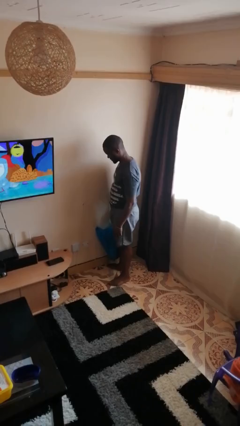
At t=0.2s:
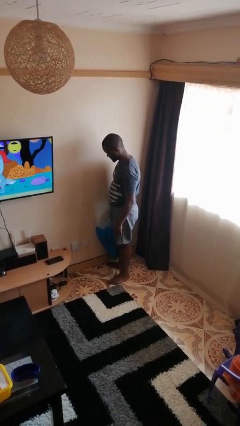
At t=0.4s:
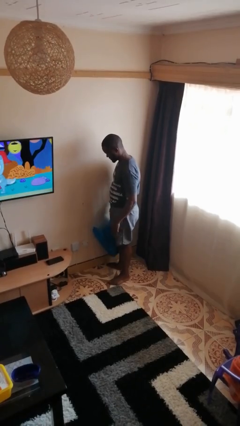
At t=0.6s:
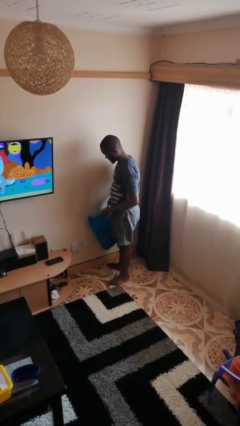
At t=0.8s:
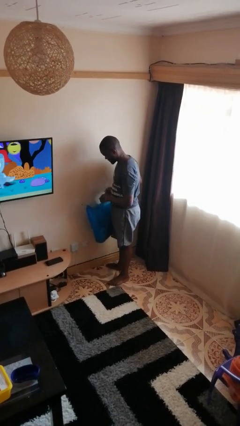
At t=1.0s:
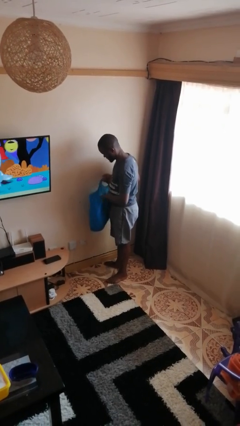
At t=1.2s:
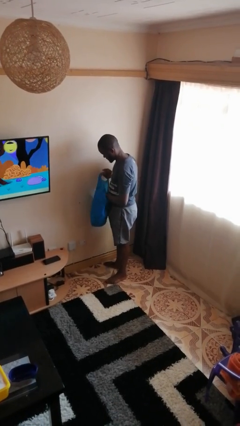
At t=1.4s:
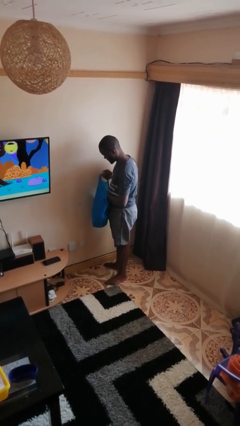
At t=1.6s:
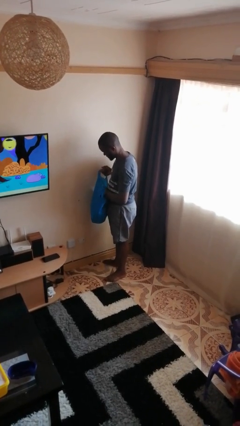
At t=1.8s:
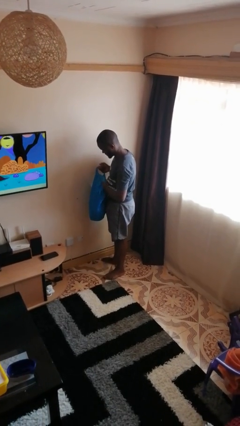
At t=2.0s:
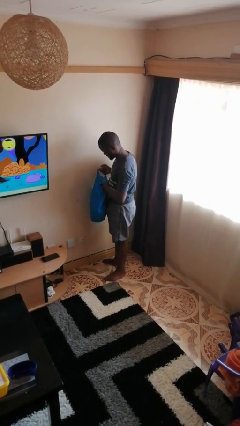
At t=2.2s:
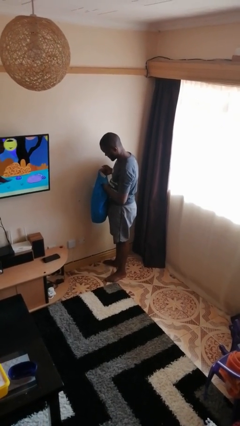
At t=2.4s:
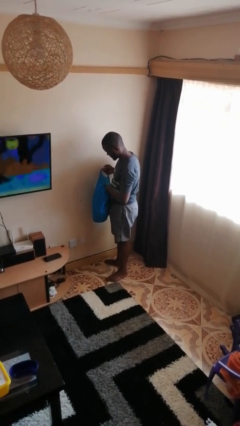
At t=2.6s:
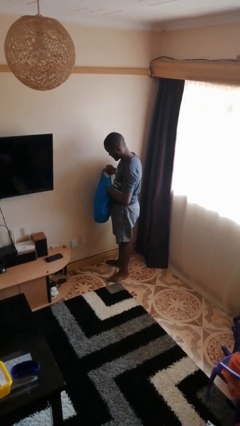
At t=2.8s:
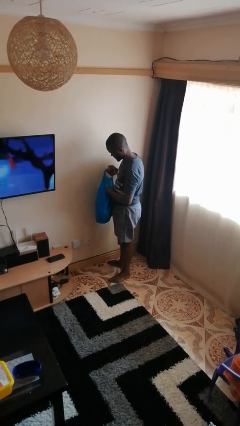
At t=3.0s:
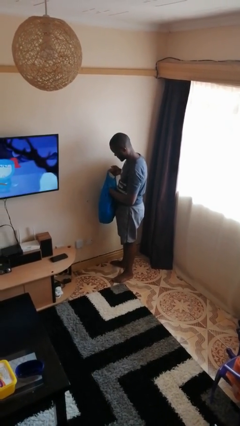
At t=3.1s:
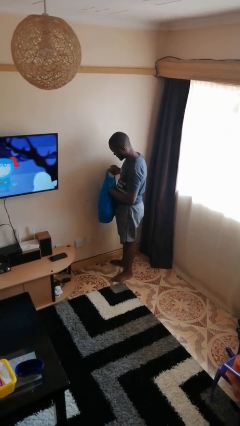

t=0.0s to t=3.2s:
person searches in bag

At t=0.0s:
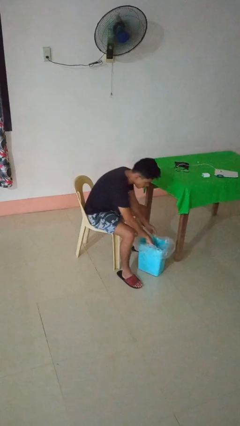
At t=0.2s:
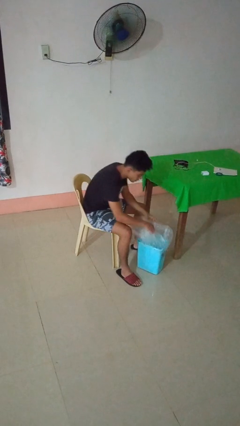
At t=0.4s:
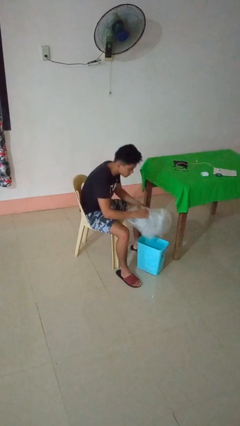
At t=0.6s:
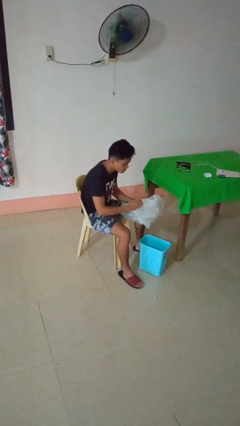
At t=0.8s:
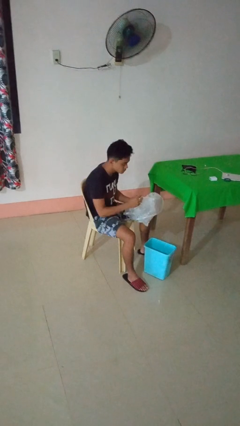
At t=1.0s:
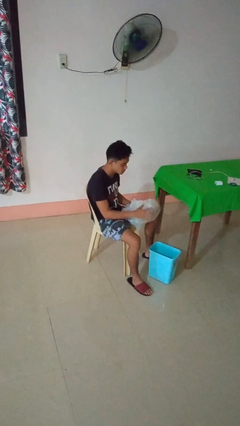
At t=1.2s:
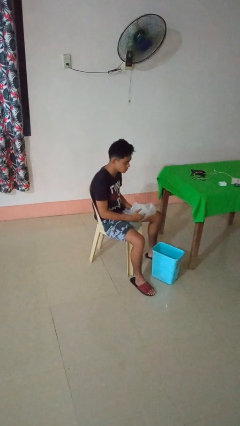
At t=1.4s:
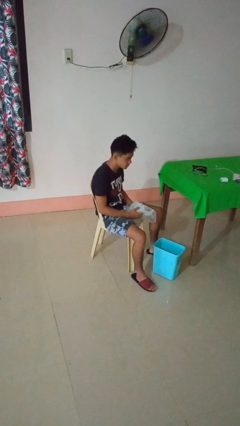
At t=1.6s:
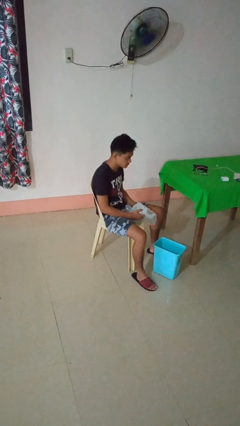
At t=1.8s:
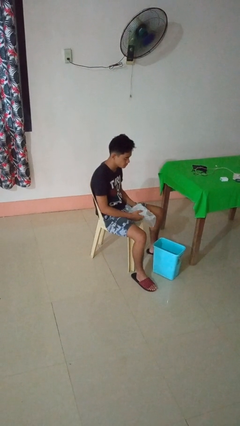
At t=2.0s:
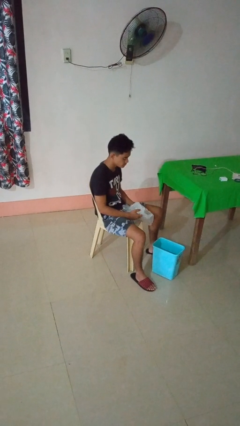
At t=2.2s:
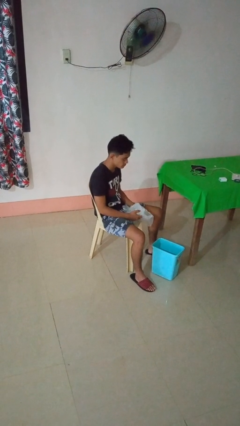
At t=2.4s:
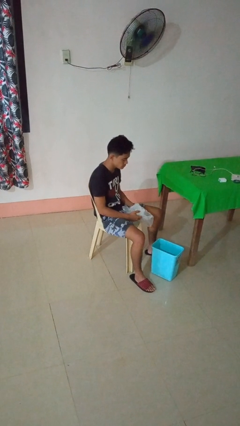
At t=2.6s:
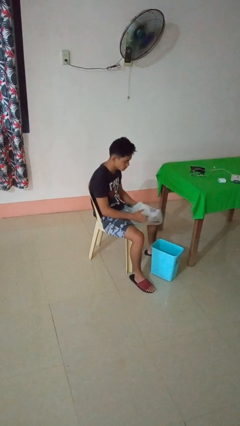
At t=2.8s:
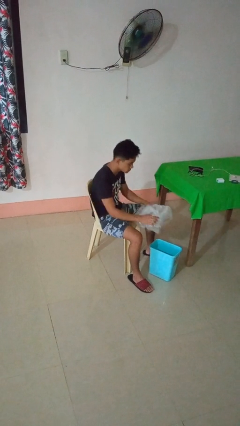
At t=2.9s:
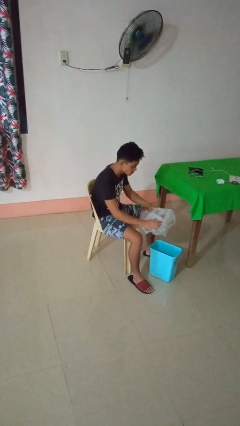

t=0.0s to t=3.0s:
person removes trashbag from trashcan

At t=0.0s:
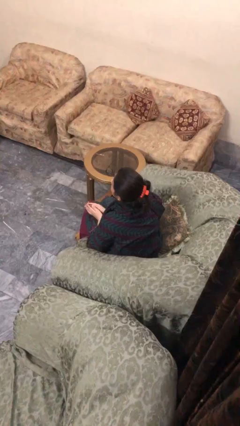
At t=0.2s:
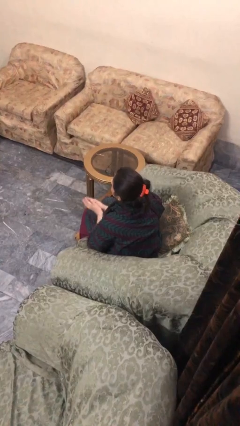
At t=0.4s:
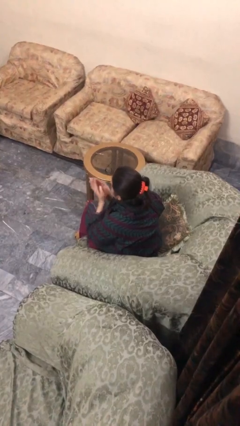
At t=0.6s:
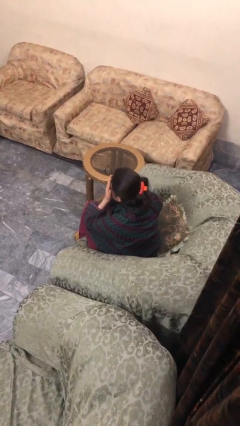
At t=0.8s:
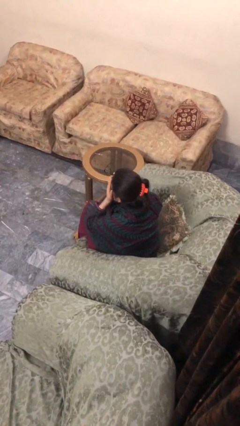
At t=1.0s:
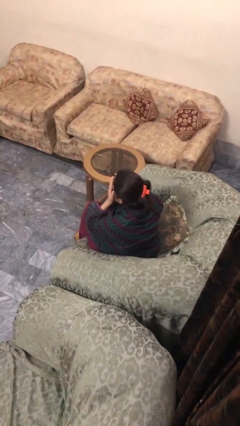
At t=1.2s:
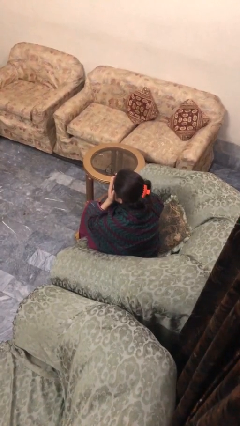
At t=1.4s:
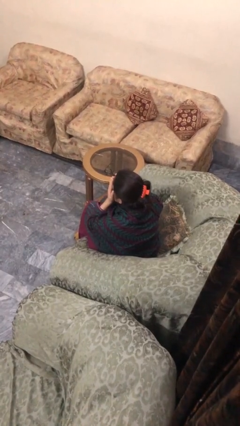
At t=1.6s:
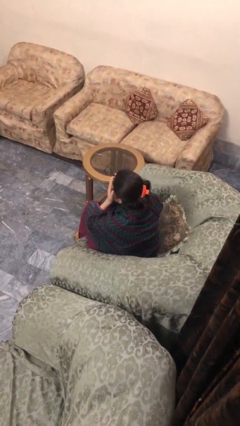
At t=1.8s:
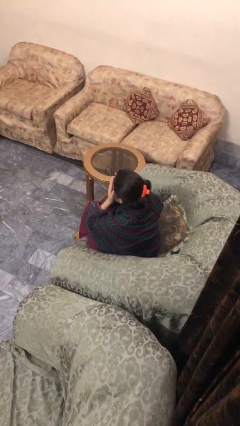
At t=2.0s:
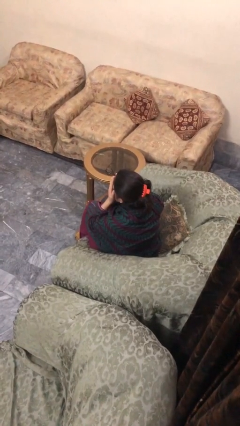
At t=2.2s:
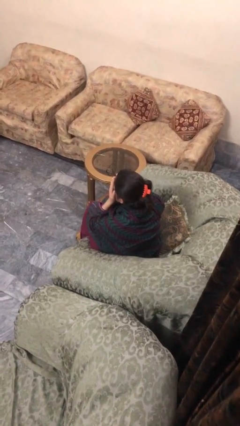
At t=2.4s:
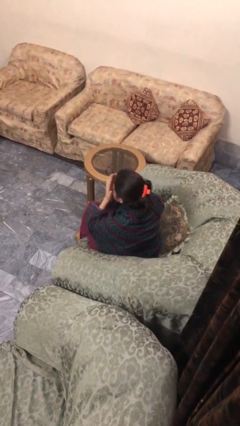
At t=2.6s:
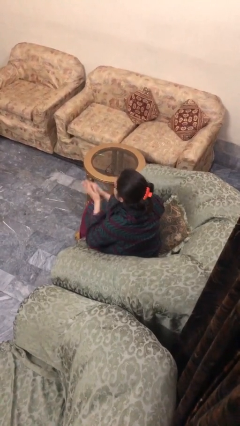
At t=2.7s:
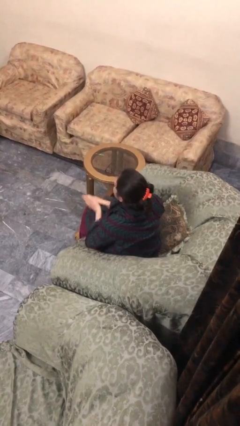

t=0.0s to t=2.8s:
person covers face with hands

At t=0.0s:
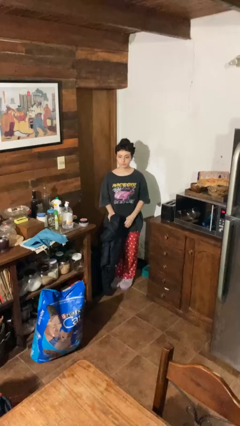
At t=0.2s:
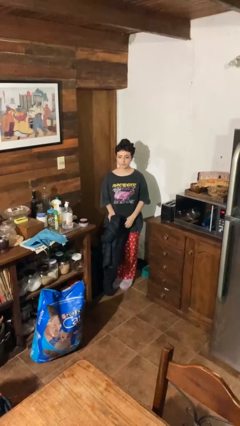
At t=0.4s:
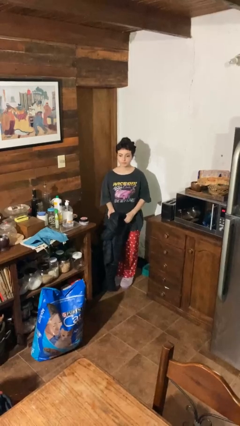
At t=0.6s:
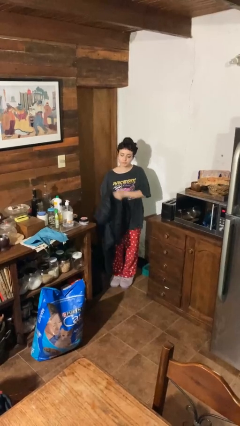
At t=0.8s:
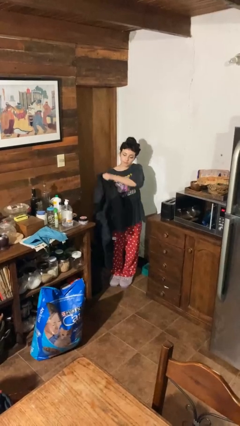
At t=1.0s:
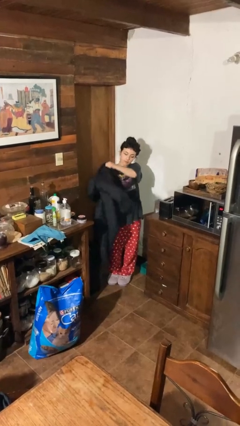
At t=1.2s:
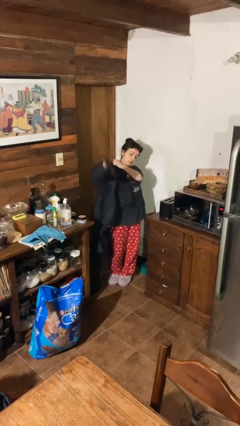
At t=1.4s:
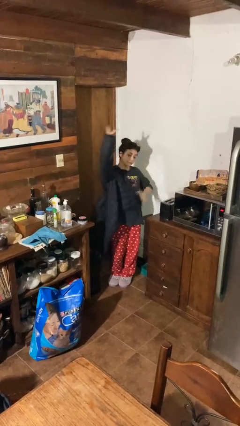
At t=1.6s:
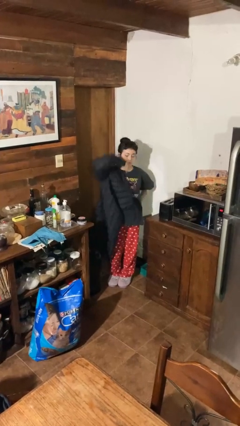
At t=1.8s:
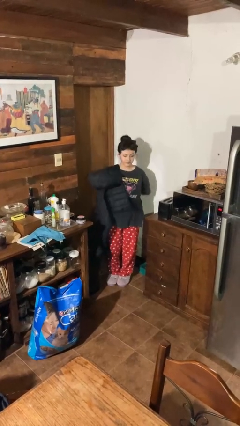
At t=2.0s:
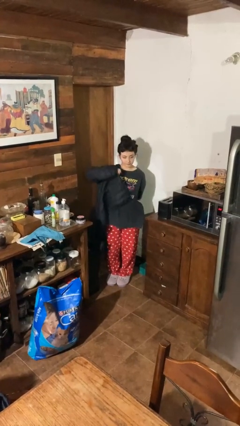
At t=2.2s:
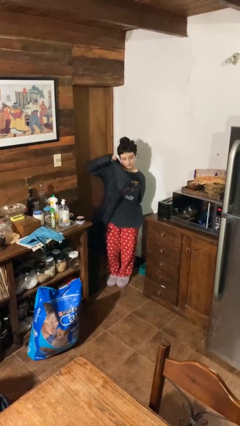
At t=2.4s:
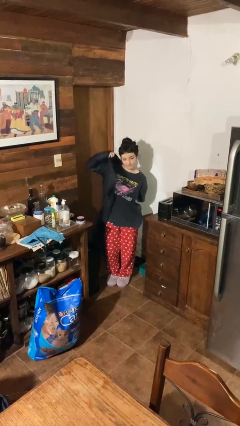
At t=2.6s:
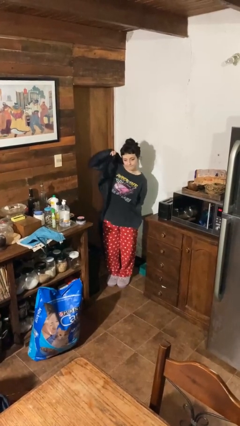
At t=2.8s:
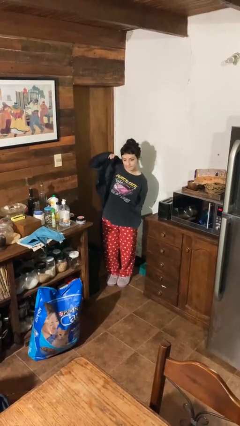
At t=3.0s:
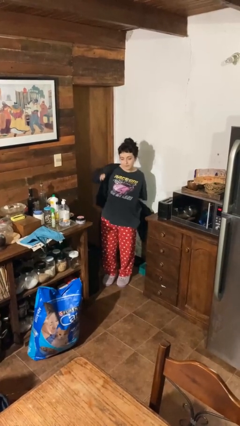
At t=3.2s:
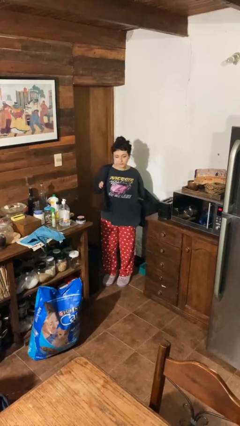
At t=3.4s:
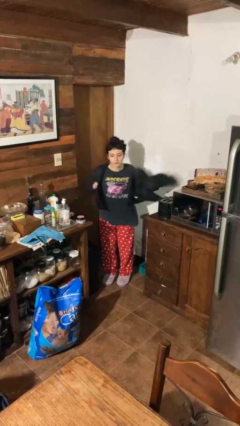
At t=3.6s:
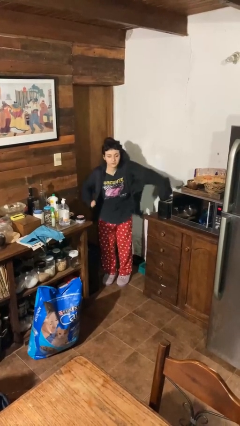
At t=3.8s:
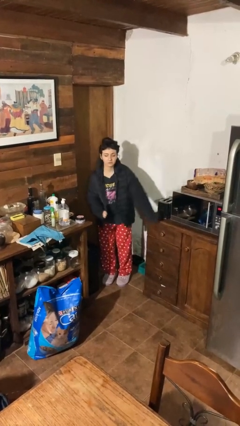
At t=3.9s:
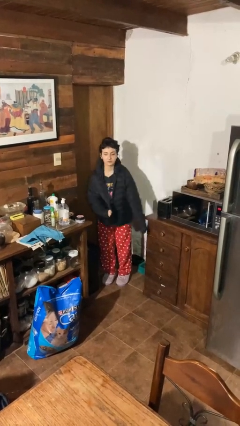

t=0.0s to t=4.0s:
person puts on jacket

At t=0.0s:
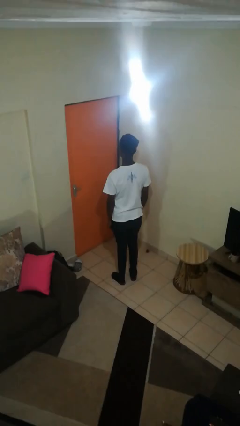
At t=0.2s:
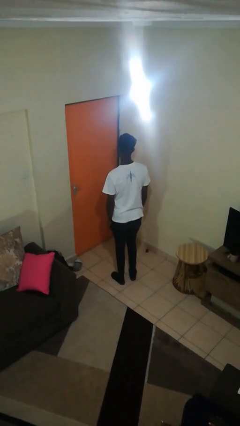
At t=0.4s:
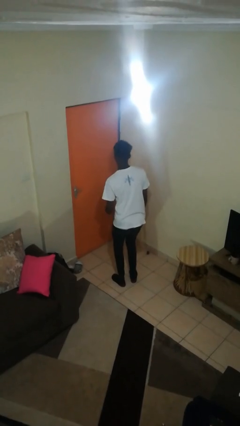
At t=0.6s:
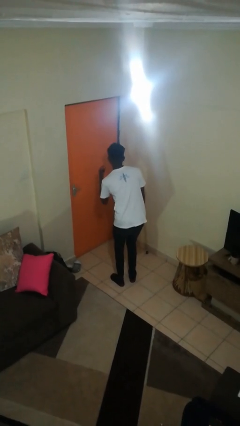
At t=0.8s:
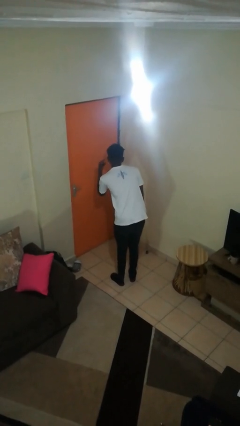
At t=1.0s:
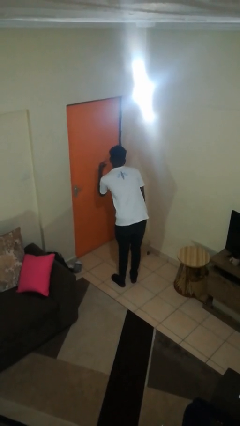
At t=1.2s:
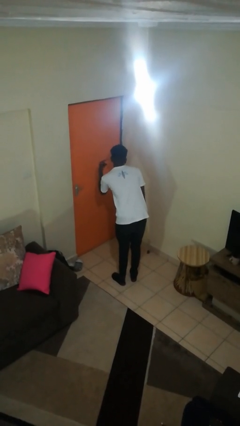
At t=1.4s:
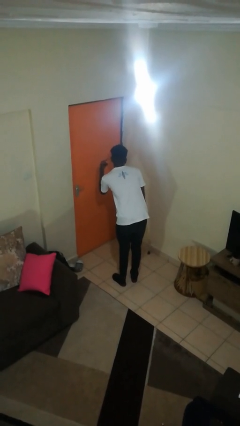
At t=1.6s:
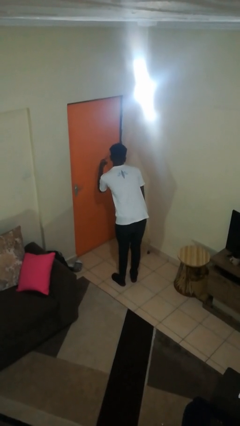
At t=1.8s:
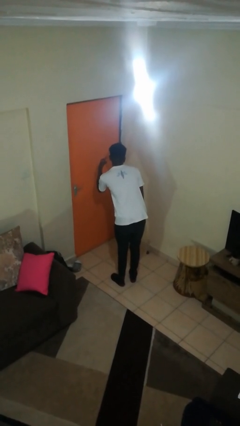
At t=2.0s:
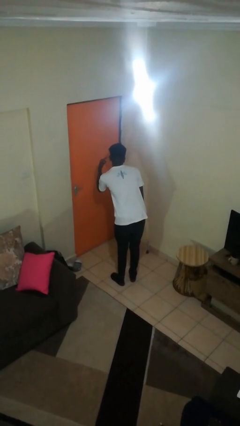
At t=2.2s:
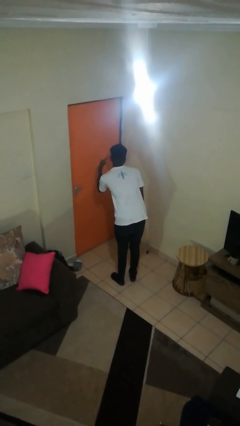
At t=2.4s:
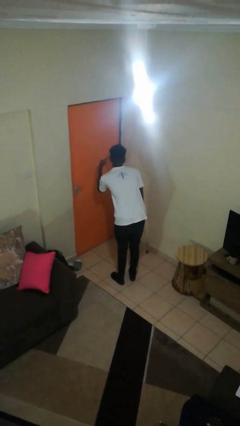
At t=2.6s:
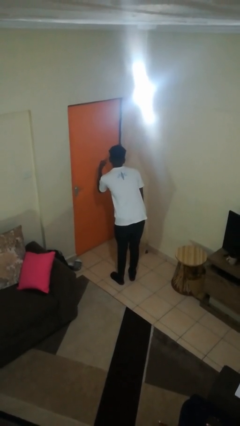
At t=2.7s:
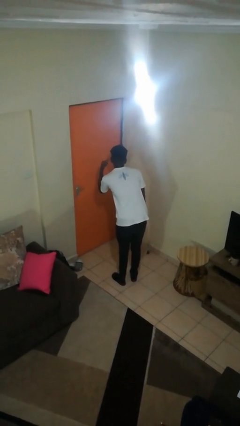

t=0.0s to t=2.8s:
person gestures listen closely

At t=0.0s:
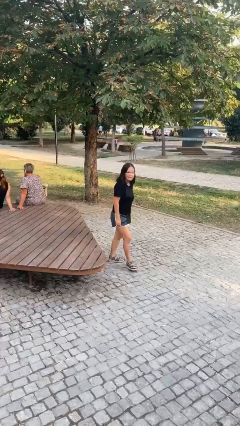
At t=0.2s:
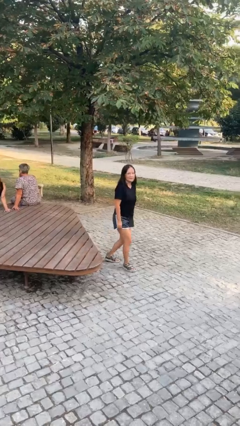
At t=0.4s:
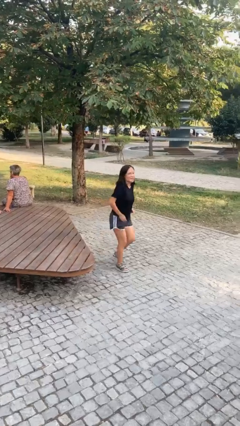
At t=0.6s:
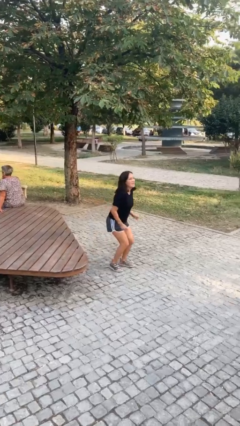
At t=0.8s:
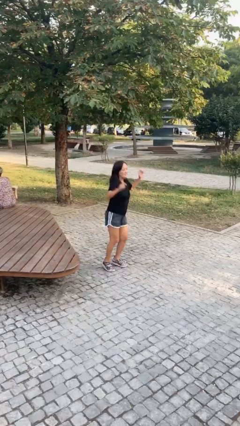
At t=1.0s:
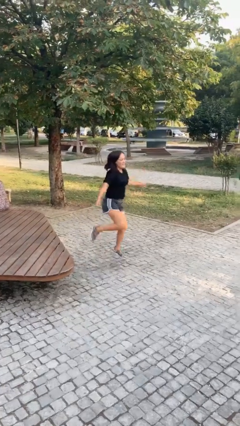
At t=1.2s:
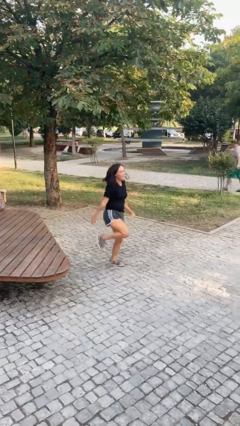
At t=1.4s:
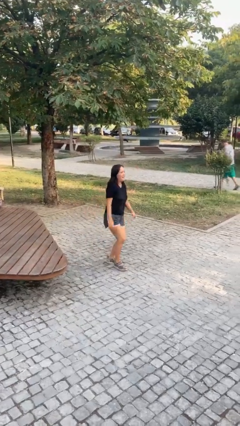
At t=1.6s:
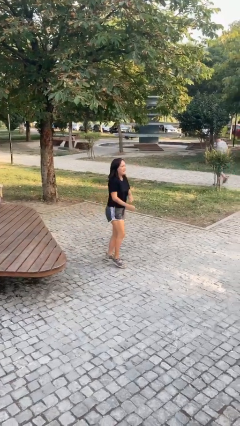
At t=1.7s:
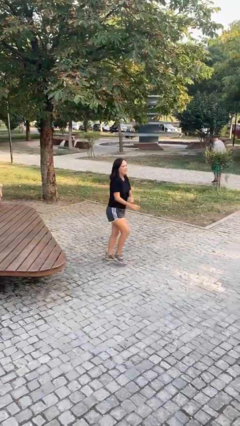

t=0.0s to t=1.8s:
person jumps
